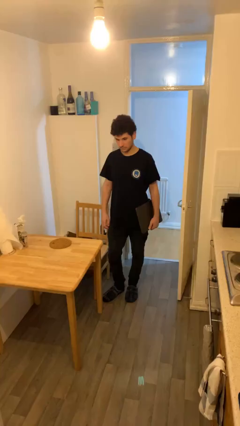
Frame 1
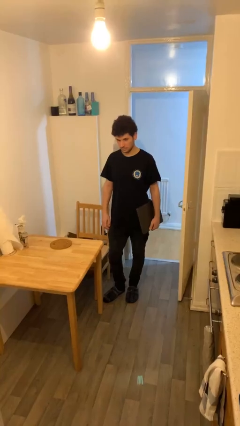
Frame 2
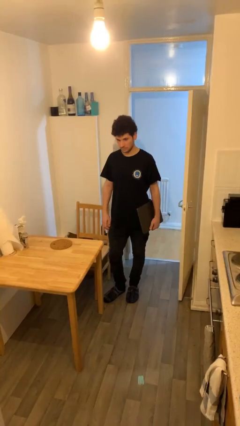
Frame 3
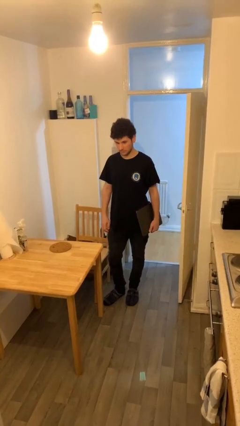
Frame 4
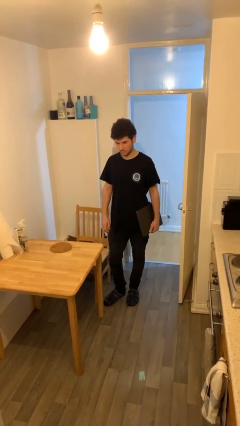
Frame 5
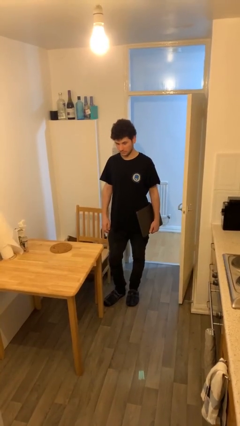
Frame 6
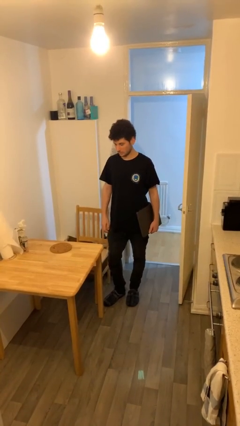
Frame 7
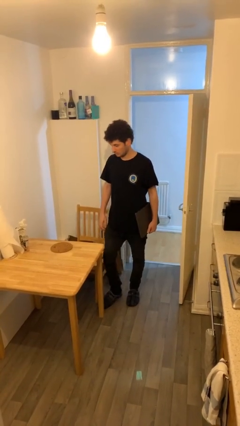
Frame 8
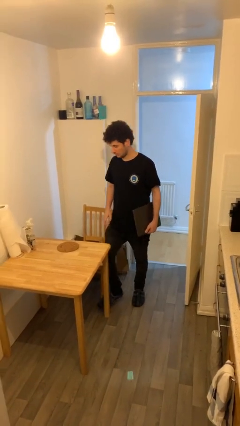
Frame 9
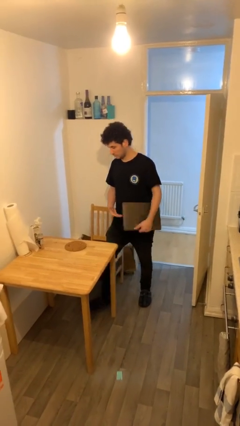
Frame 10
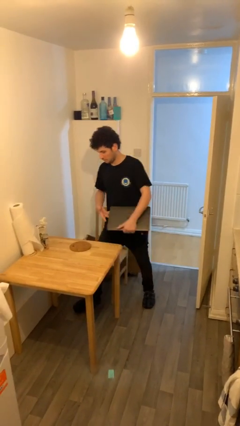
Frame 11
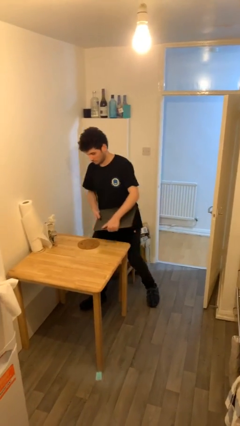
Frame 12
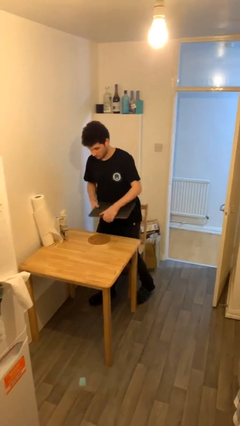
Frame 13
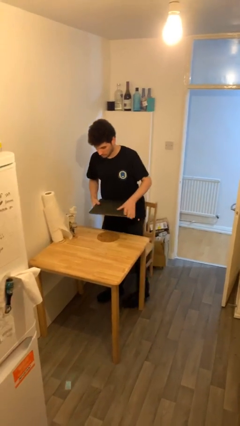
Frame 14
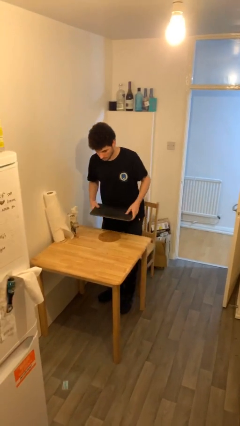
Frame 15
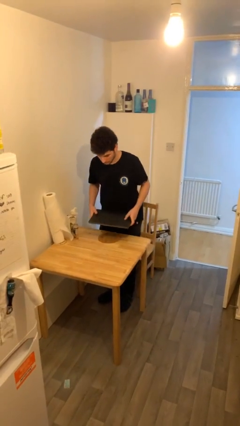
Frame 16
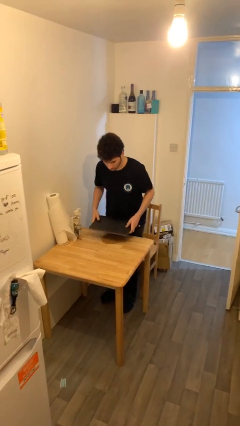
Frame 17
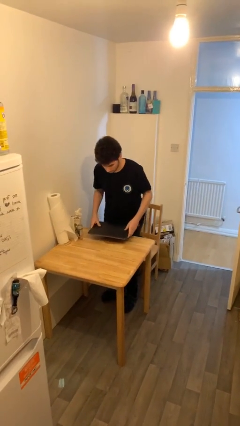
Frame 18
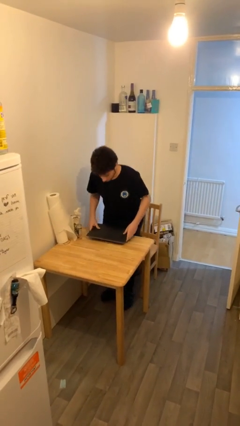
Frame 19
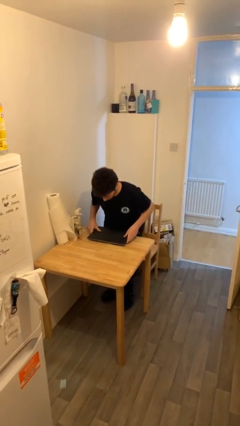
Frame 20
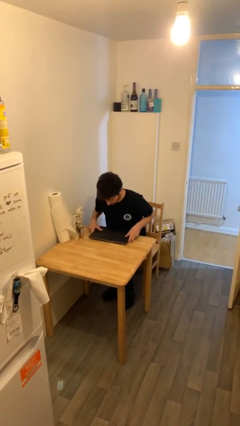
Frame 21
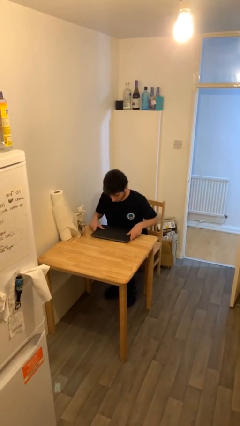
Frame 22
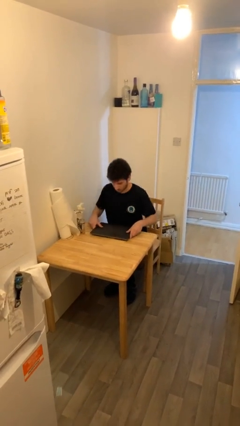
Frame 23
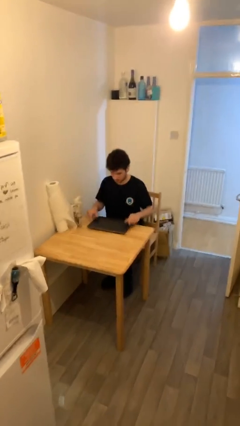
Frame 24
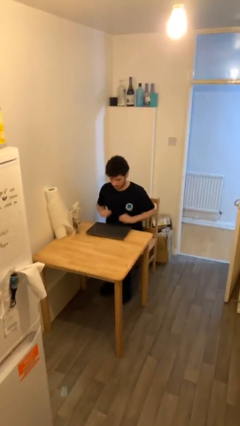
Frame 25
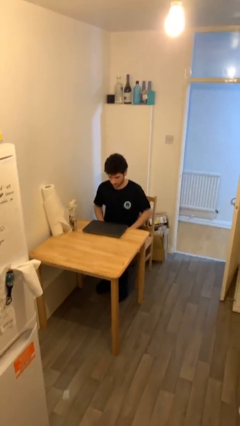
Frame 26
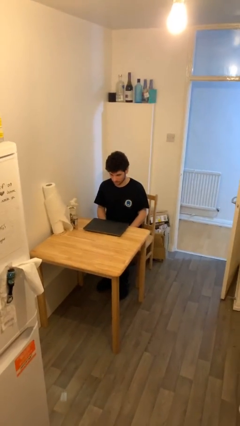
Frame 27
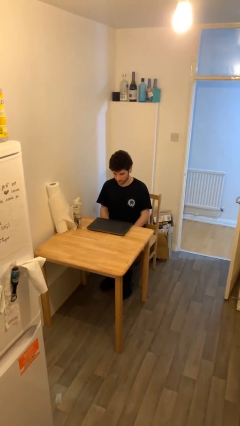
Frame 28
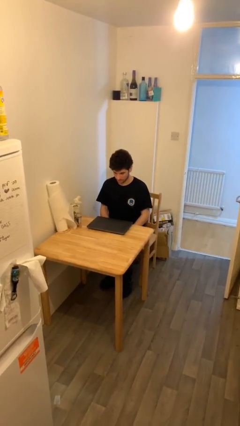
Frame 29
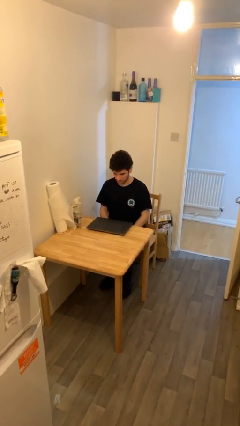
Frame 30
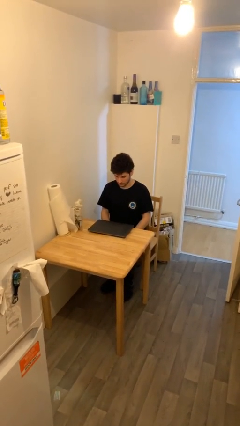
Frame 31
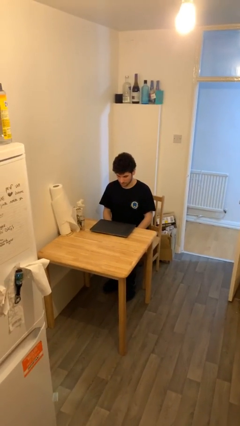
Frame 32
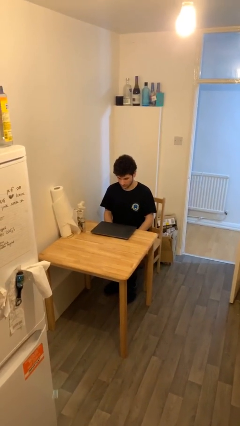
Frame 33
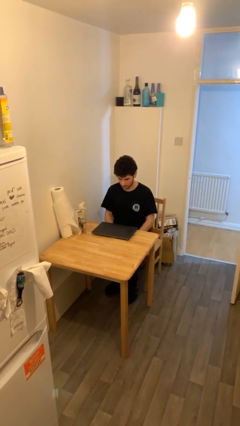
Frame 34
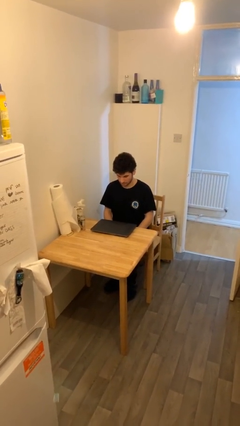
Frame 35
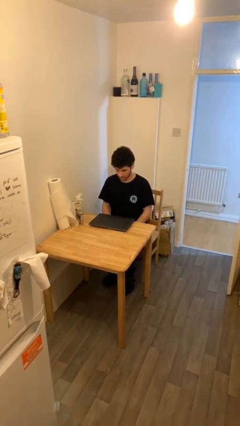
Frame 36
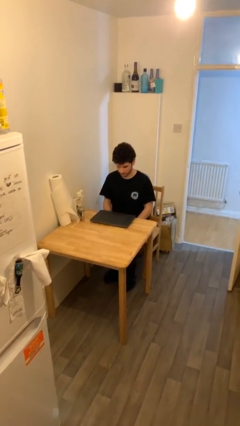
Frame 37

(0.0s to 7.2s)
person sits down

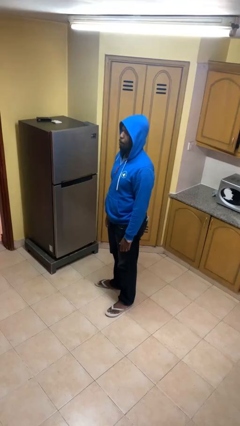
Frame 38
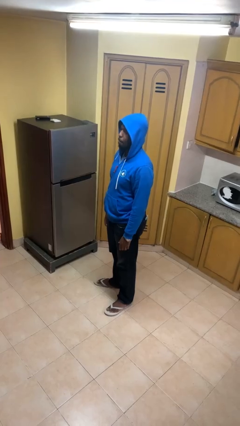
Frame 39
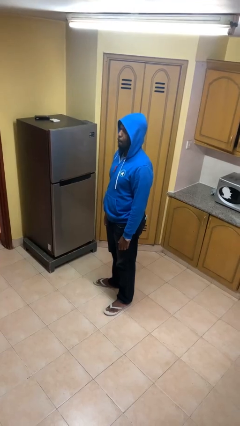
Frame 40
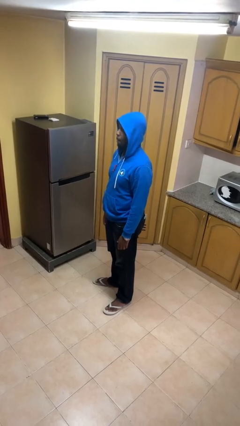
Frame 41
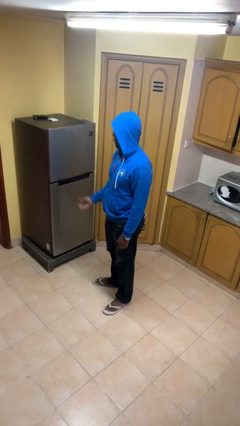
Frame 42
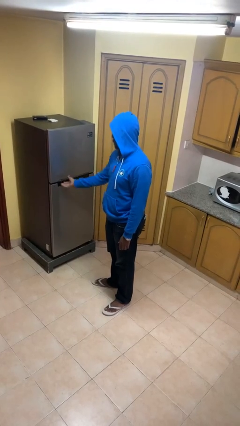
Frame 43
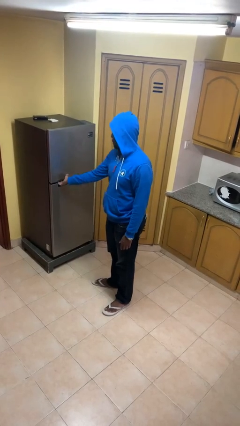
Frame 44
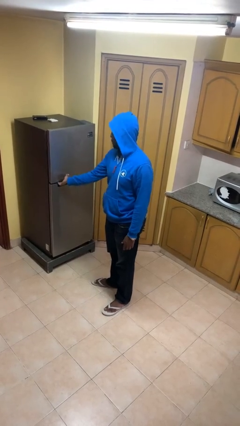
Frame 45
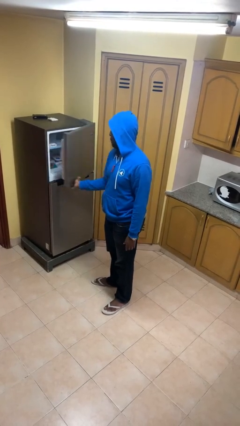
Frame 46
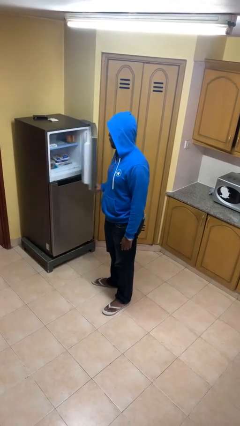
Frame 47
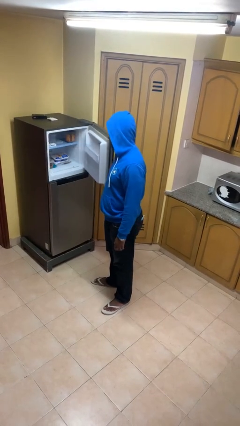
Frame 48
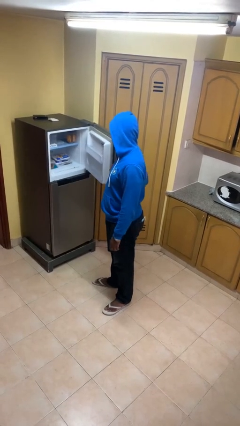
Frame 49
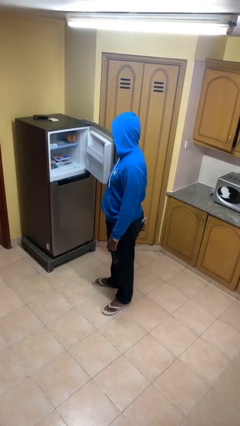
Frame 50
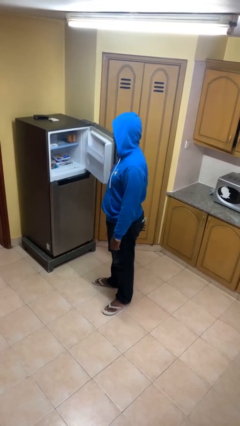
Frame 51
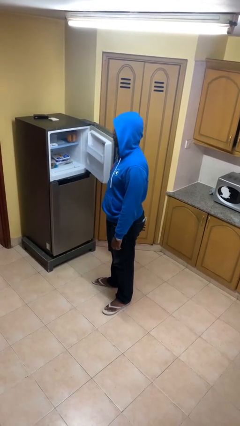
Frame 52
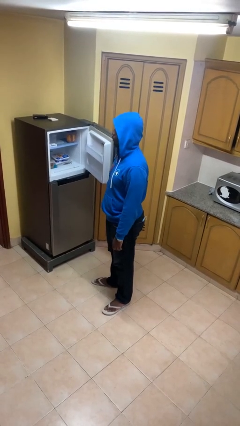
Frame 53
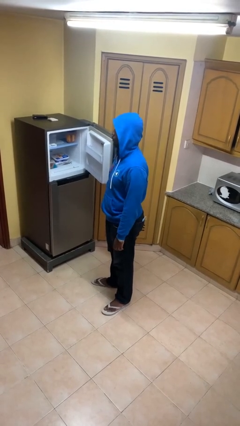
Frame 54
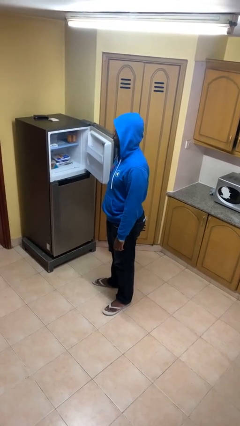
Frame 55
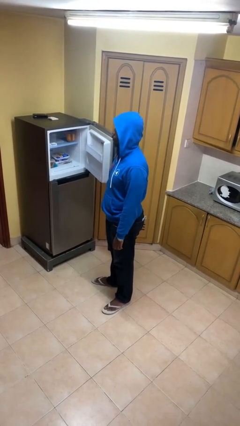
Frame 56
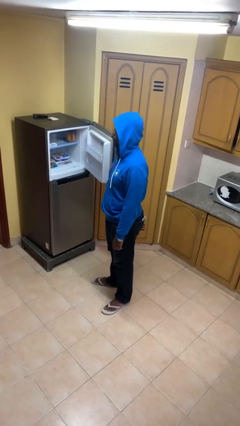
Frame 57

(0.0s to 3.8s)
person opens refrigerator

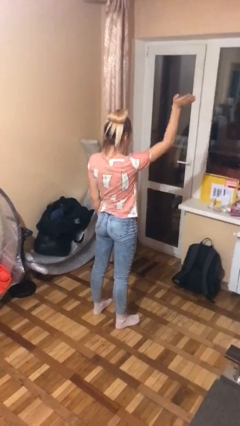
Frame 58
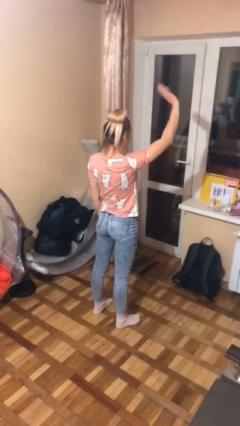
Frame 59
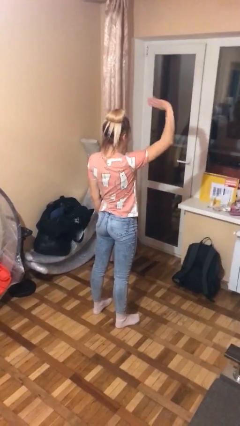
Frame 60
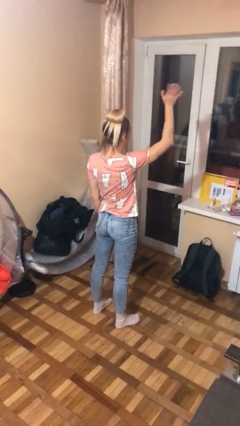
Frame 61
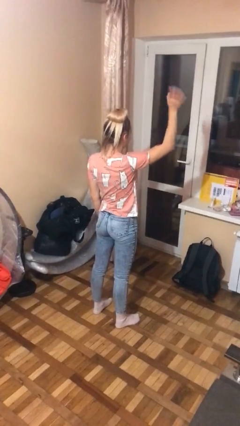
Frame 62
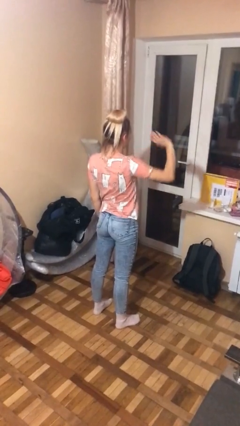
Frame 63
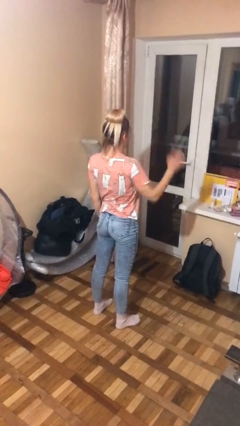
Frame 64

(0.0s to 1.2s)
person salutes

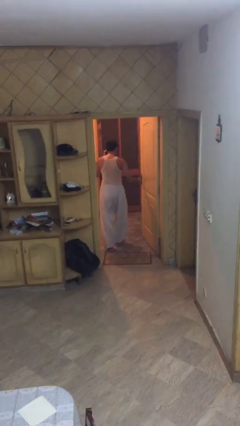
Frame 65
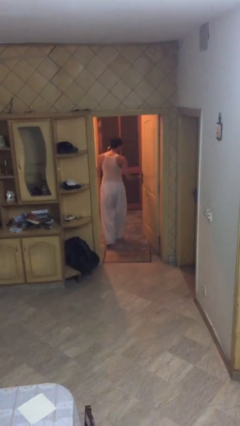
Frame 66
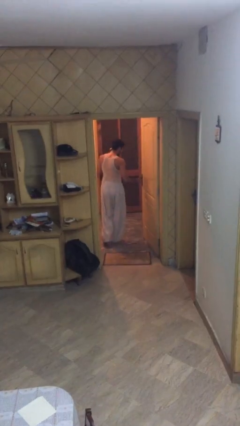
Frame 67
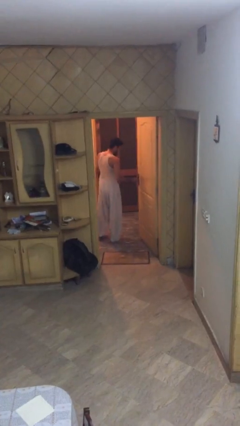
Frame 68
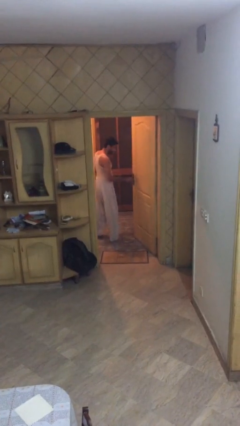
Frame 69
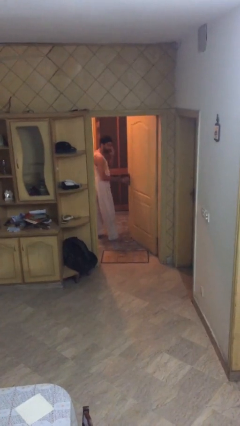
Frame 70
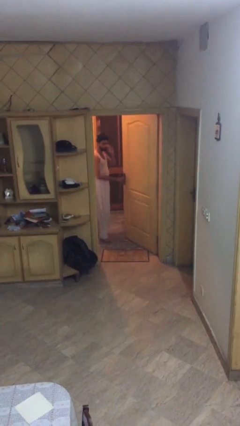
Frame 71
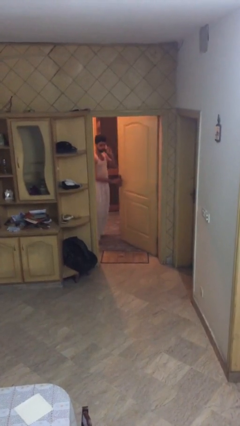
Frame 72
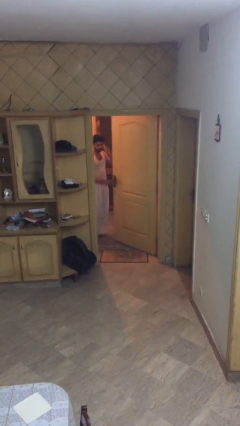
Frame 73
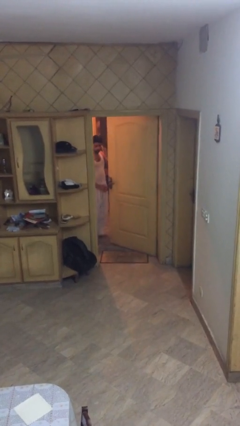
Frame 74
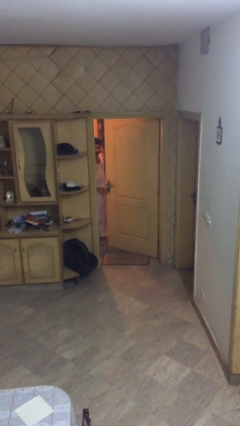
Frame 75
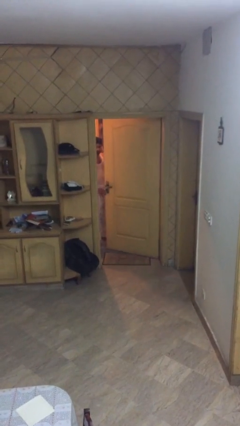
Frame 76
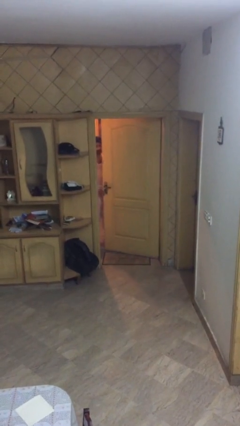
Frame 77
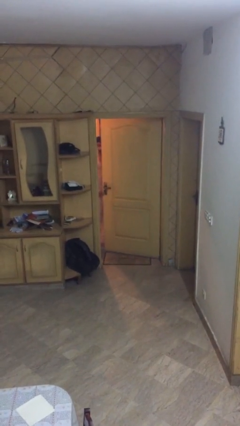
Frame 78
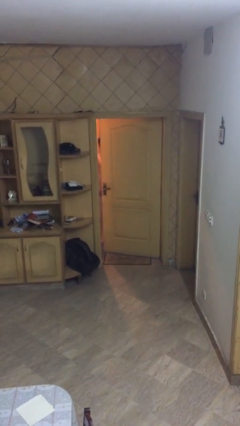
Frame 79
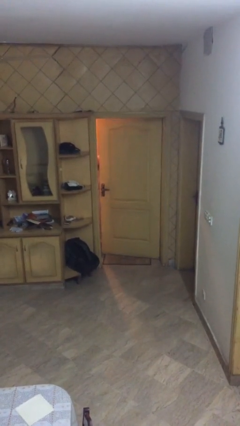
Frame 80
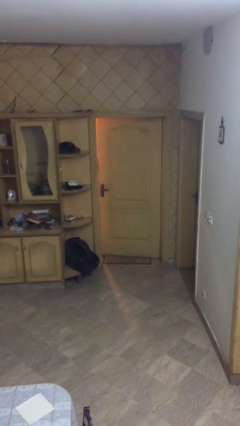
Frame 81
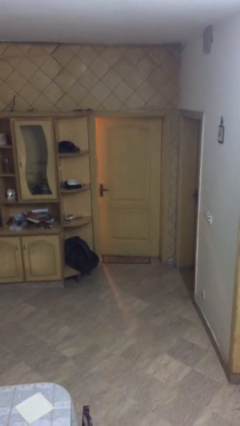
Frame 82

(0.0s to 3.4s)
person closes facility door

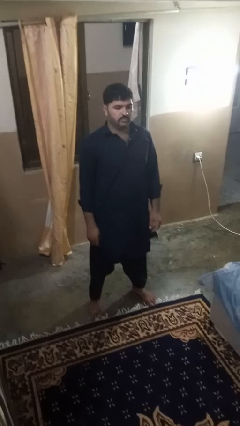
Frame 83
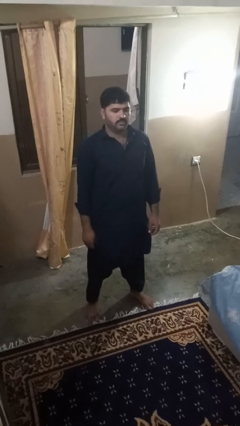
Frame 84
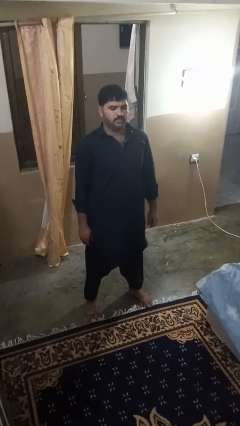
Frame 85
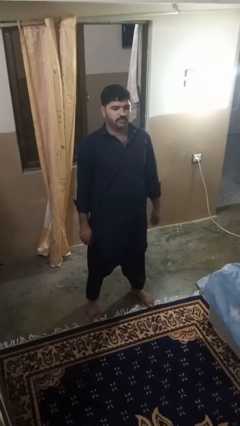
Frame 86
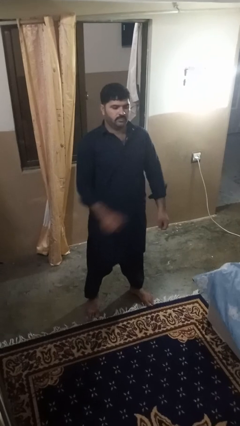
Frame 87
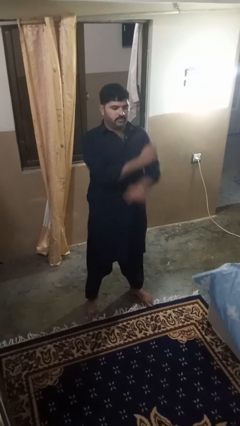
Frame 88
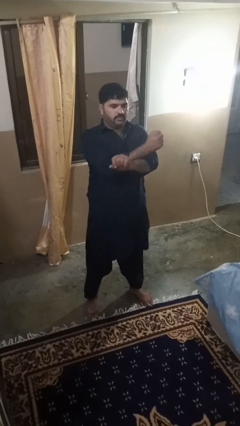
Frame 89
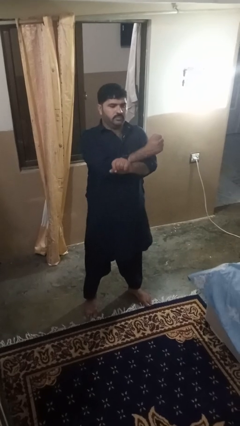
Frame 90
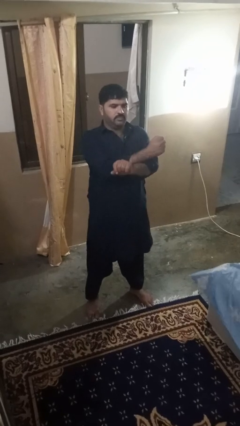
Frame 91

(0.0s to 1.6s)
person crosses arms

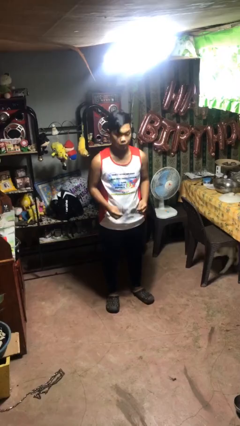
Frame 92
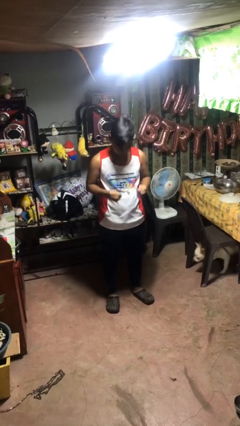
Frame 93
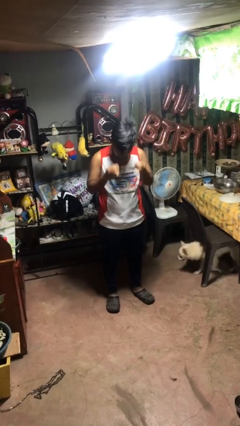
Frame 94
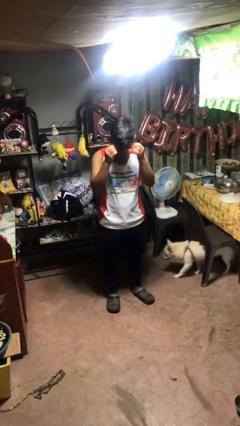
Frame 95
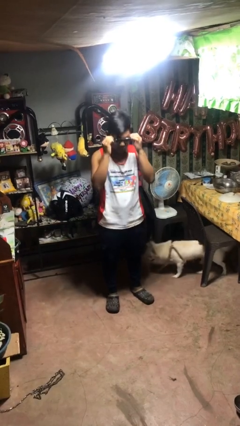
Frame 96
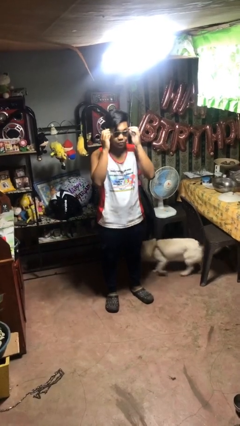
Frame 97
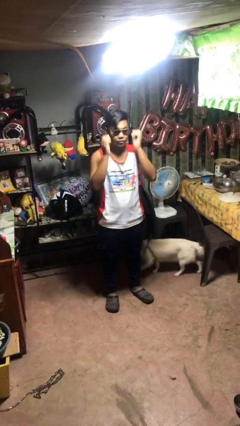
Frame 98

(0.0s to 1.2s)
person puts on sunglasses
